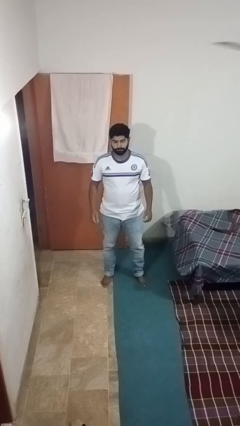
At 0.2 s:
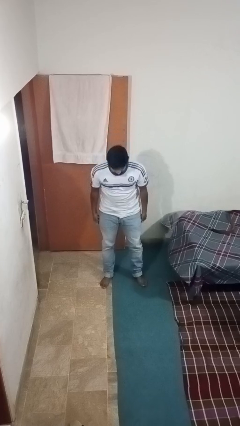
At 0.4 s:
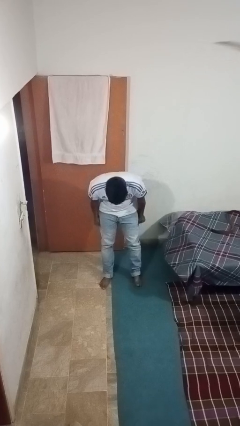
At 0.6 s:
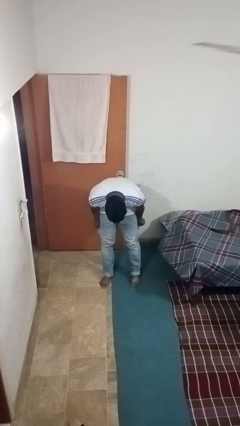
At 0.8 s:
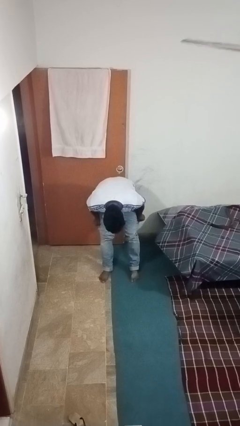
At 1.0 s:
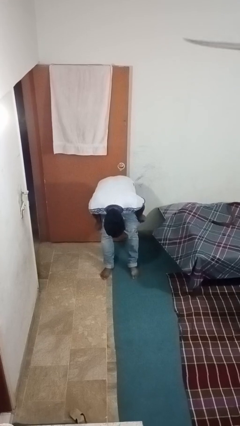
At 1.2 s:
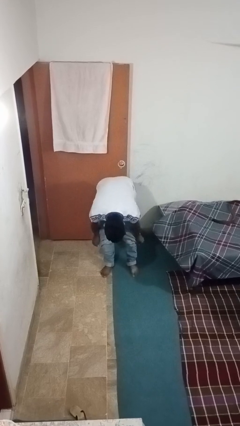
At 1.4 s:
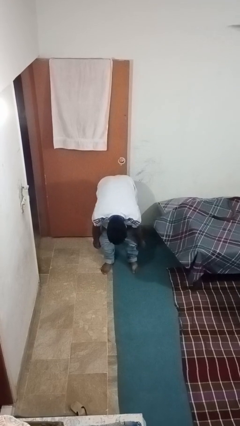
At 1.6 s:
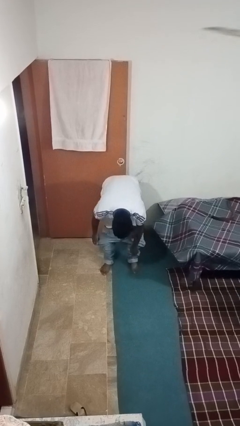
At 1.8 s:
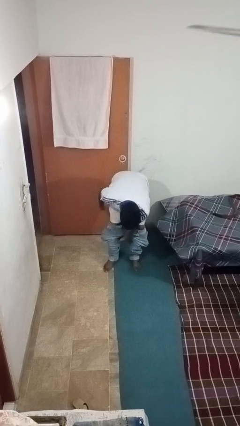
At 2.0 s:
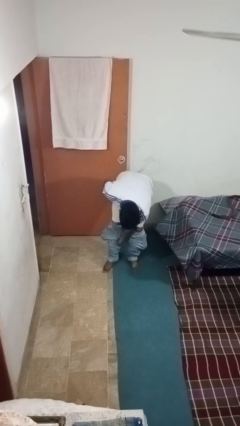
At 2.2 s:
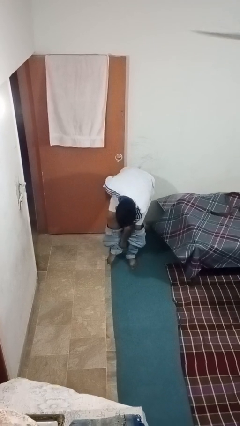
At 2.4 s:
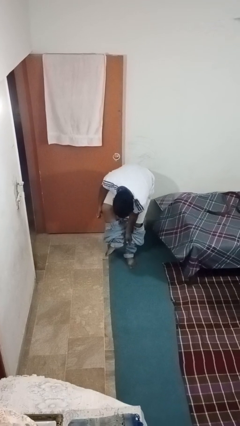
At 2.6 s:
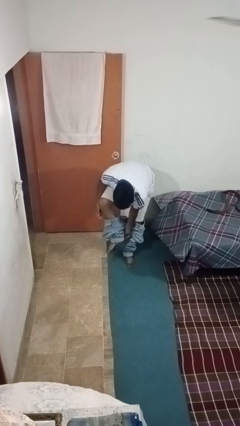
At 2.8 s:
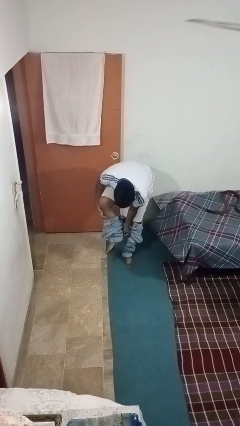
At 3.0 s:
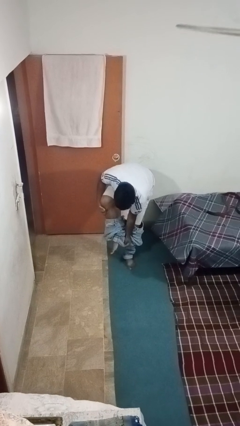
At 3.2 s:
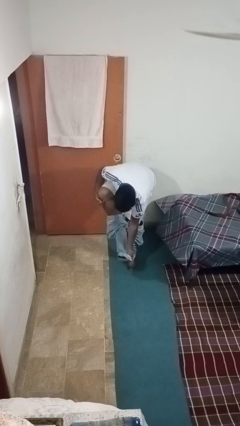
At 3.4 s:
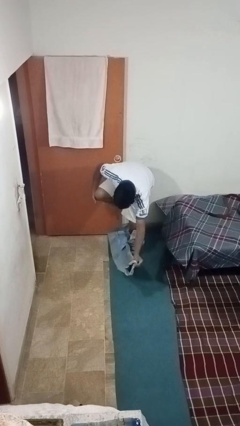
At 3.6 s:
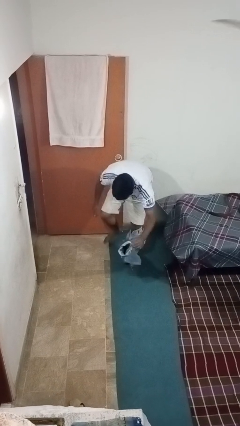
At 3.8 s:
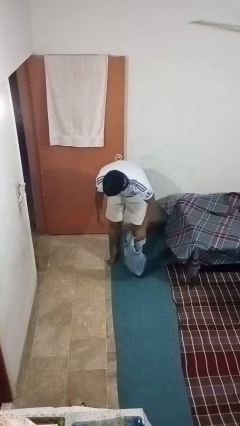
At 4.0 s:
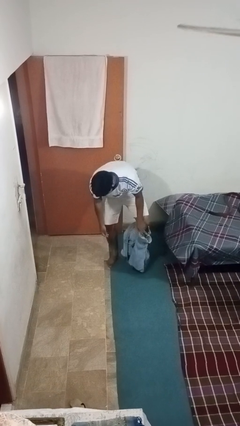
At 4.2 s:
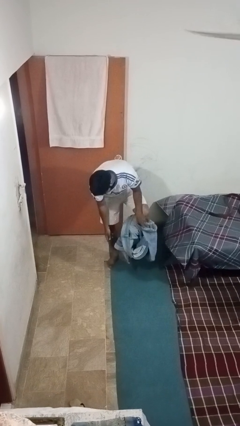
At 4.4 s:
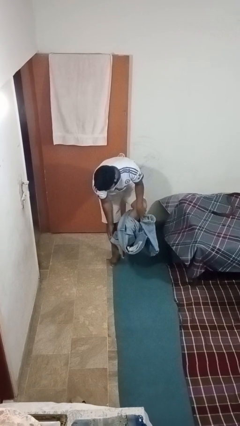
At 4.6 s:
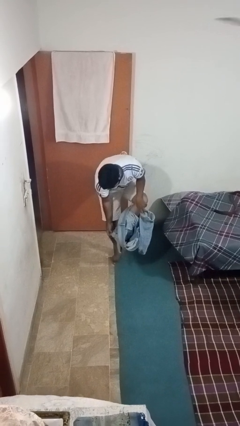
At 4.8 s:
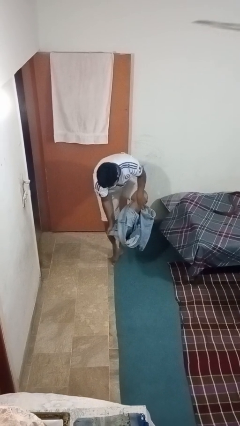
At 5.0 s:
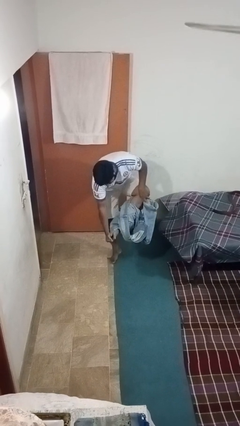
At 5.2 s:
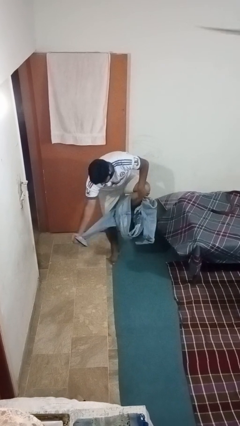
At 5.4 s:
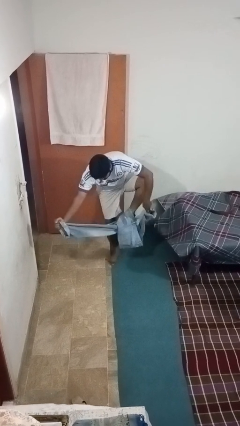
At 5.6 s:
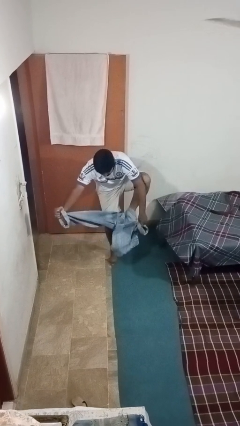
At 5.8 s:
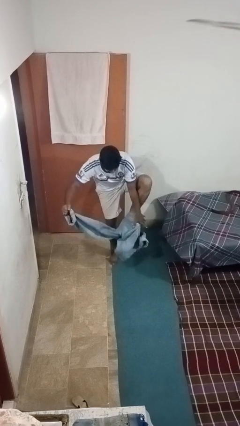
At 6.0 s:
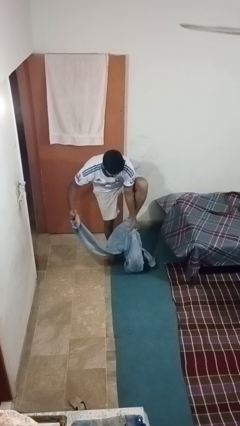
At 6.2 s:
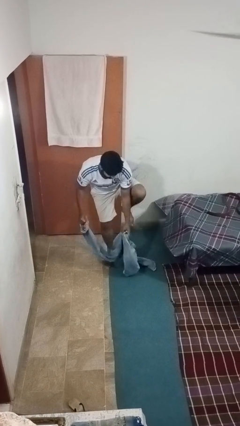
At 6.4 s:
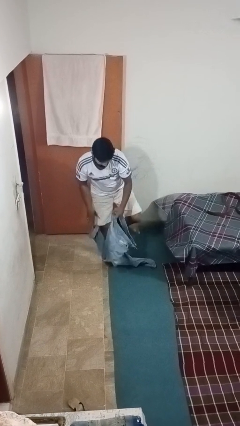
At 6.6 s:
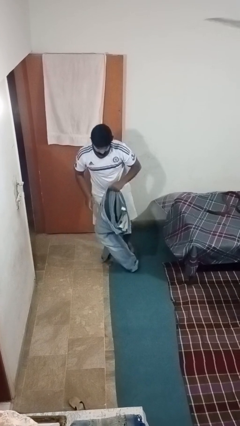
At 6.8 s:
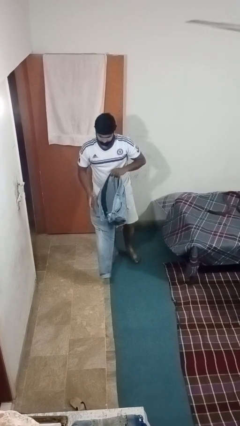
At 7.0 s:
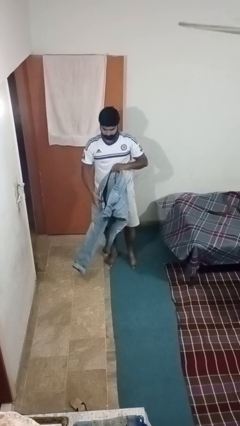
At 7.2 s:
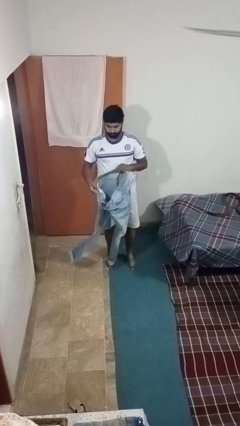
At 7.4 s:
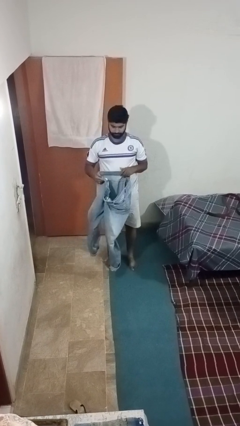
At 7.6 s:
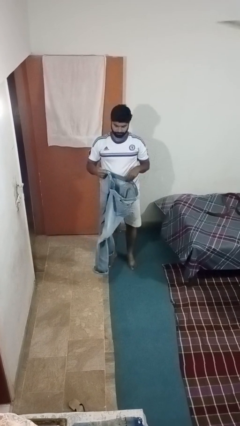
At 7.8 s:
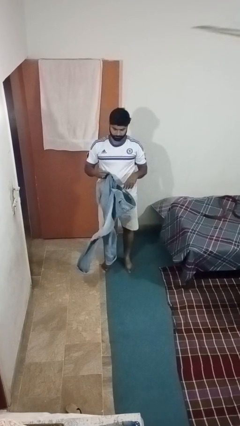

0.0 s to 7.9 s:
person takes off pants

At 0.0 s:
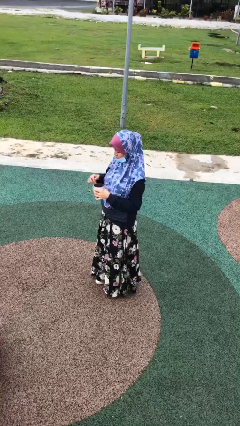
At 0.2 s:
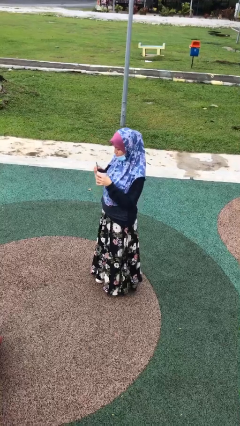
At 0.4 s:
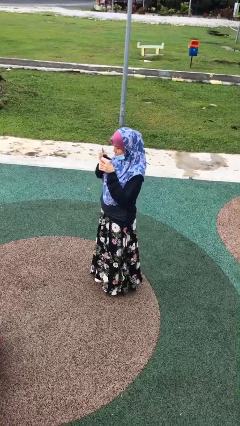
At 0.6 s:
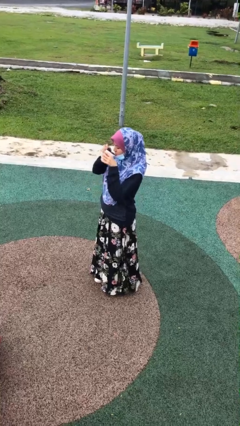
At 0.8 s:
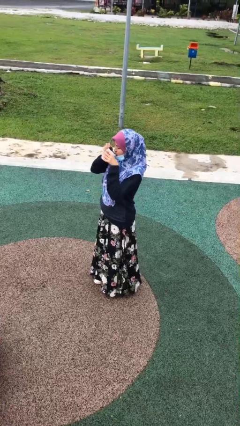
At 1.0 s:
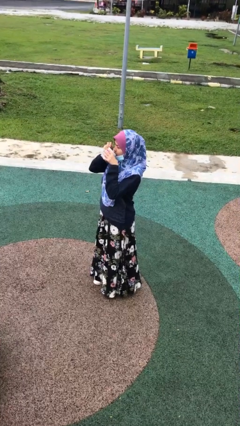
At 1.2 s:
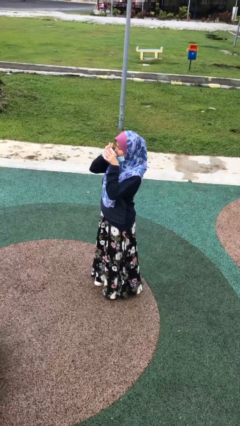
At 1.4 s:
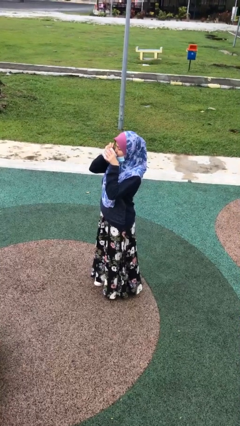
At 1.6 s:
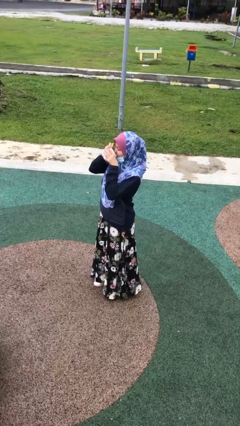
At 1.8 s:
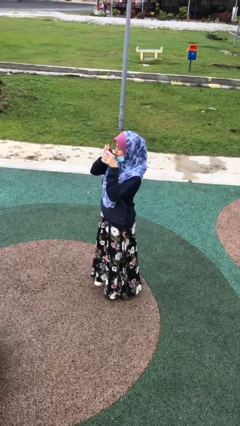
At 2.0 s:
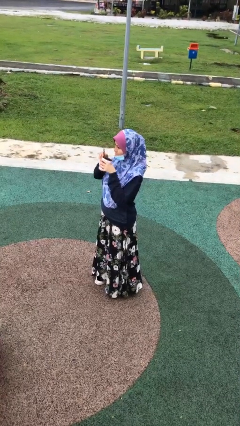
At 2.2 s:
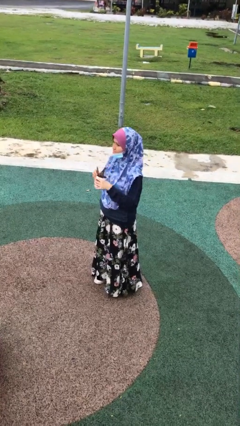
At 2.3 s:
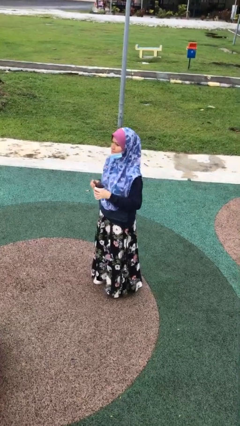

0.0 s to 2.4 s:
person drinks from mug

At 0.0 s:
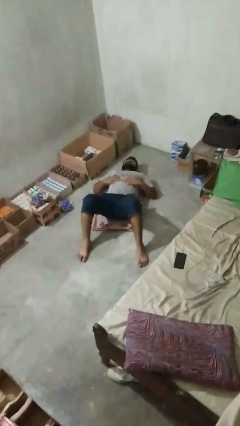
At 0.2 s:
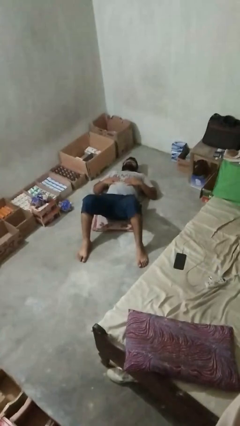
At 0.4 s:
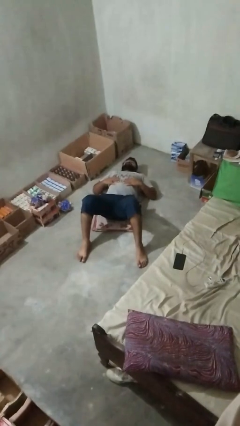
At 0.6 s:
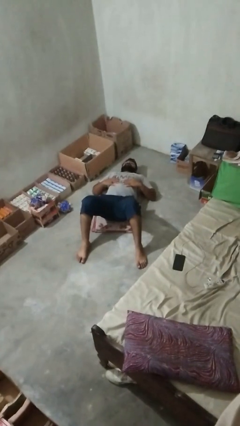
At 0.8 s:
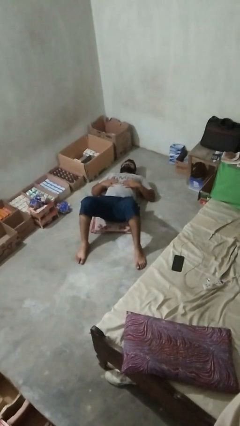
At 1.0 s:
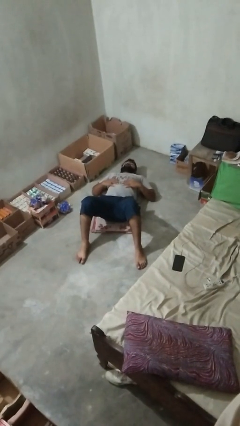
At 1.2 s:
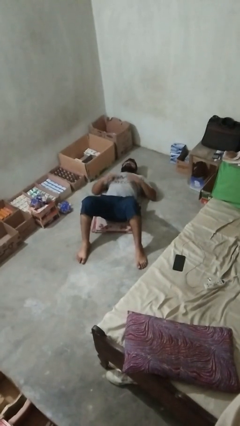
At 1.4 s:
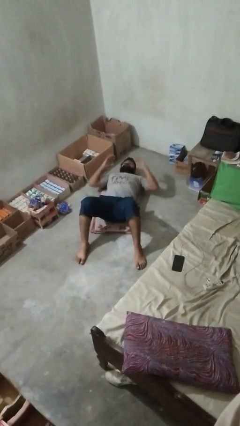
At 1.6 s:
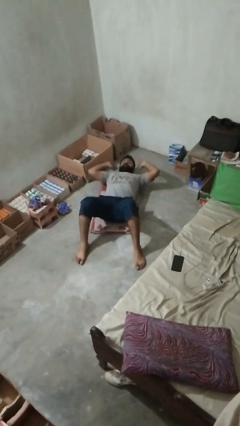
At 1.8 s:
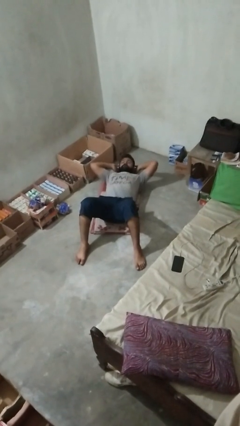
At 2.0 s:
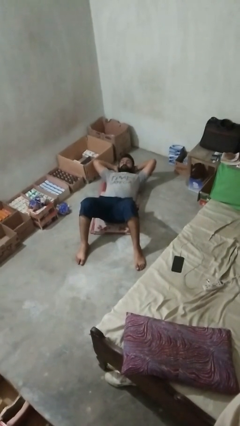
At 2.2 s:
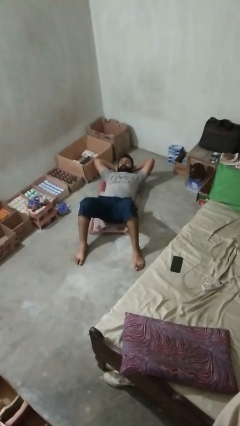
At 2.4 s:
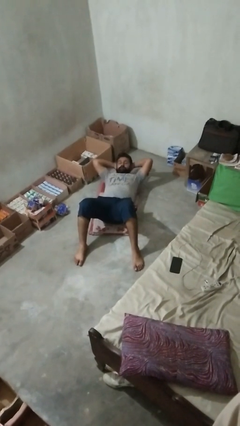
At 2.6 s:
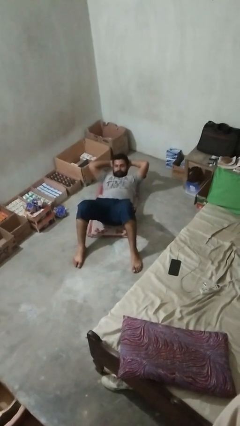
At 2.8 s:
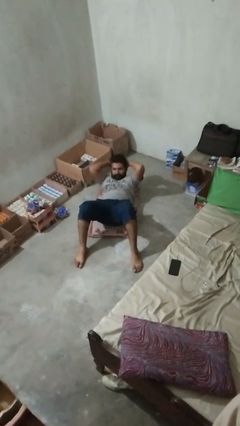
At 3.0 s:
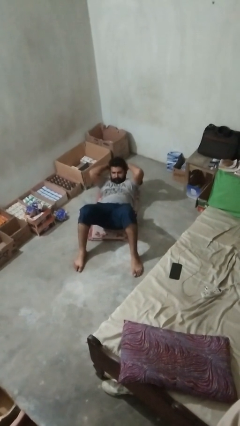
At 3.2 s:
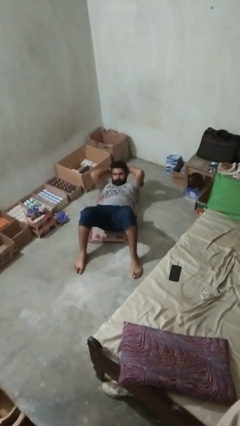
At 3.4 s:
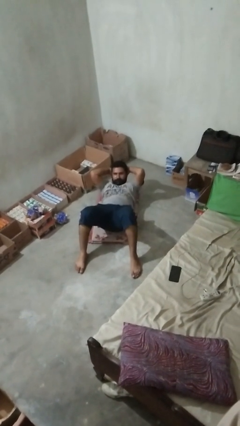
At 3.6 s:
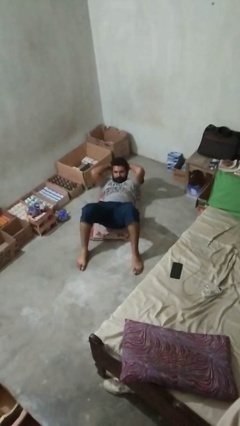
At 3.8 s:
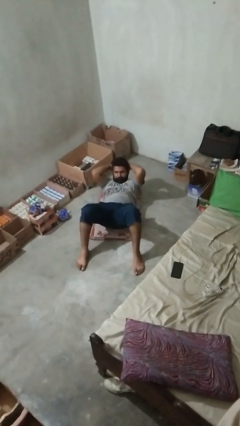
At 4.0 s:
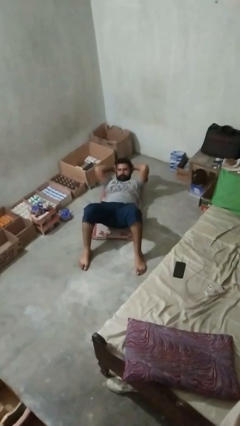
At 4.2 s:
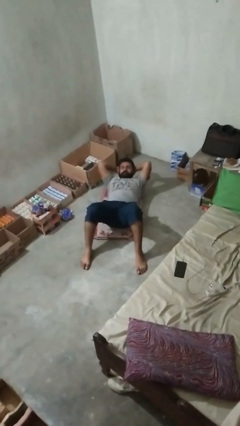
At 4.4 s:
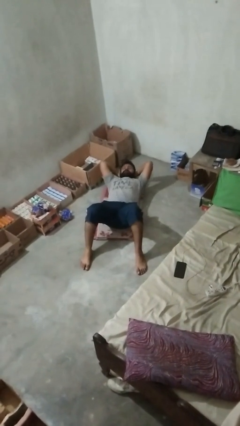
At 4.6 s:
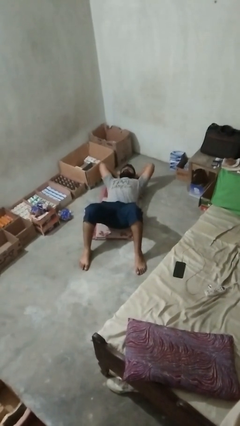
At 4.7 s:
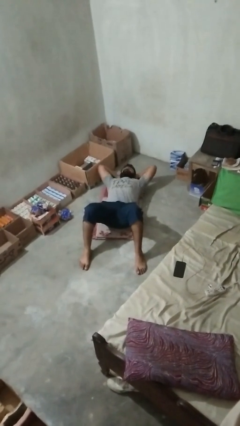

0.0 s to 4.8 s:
person exercises with situp

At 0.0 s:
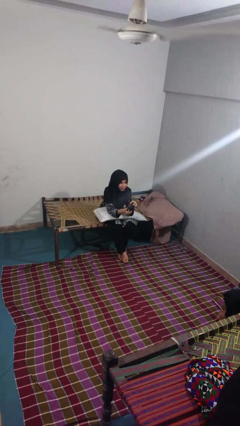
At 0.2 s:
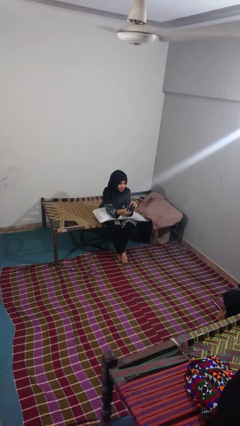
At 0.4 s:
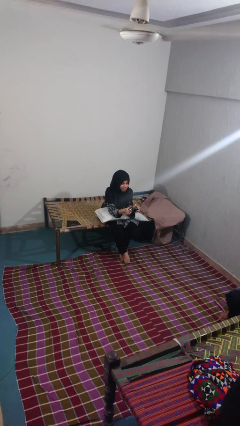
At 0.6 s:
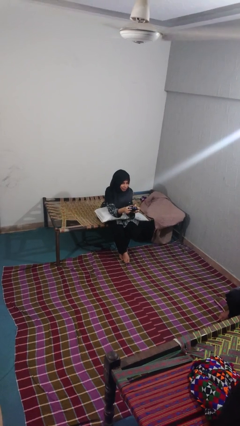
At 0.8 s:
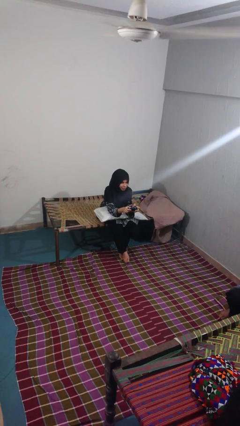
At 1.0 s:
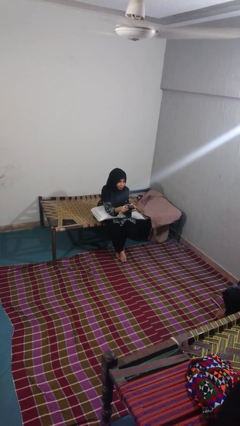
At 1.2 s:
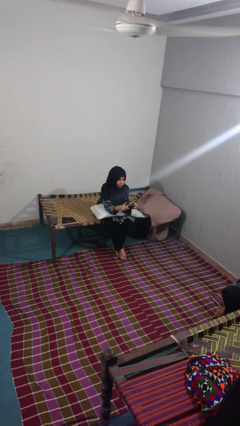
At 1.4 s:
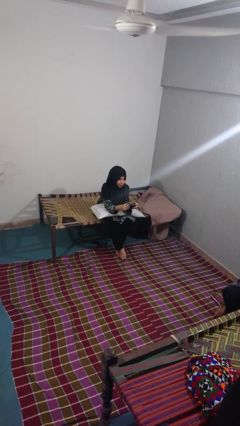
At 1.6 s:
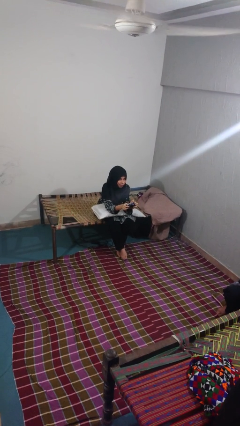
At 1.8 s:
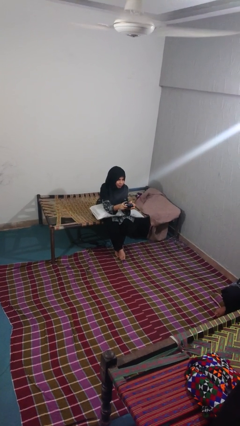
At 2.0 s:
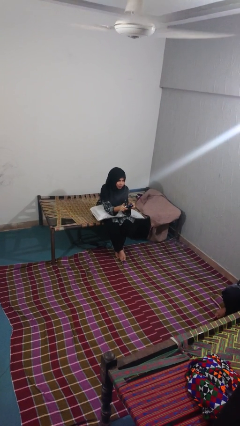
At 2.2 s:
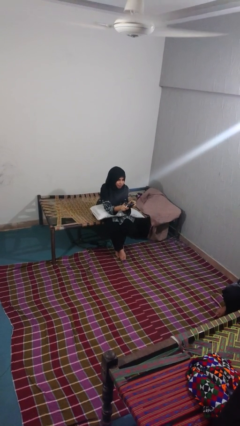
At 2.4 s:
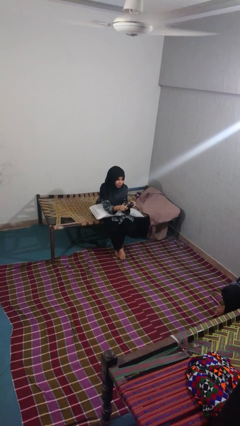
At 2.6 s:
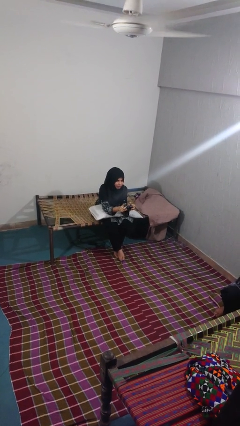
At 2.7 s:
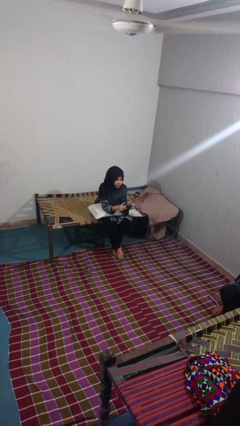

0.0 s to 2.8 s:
person interacts with handheld game
